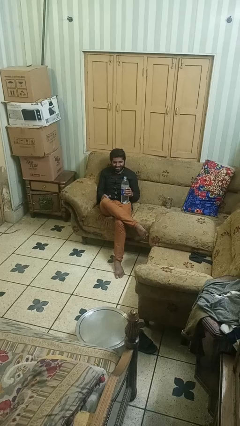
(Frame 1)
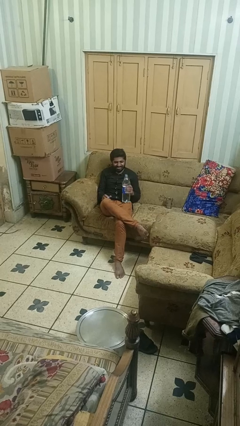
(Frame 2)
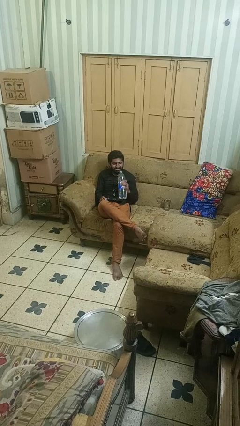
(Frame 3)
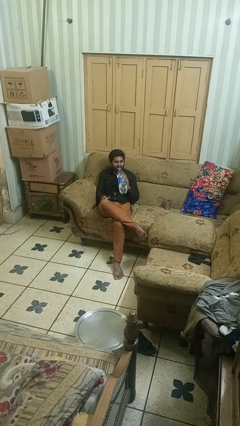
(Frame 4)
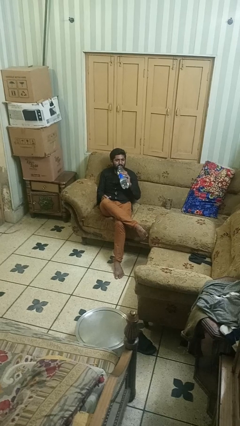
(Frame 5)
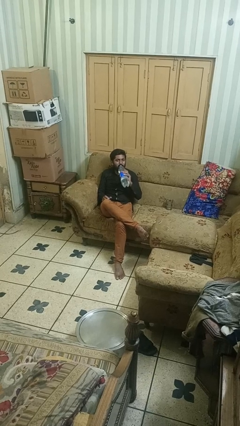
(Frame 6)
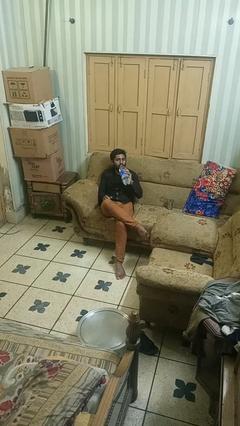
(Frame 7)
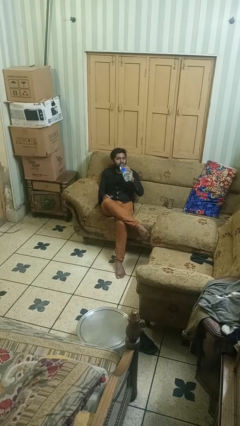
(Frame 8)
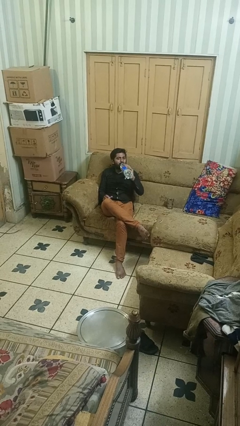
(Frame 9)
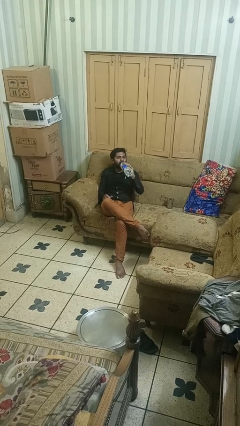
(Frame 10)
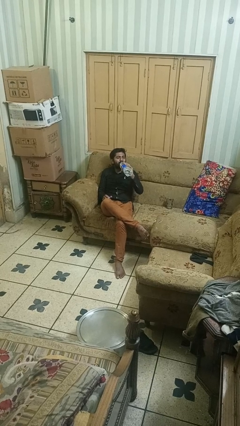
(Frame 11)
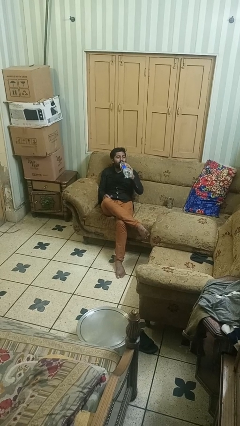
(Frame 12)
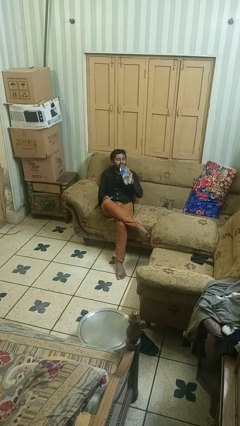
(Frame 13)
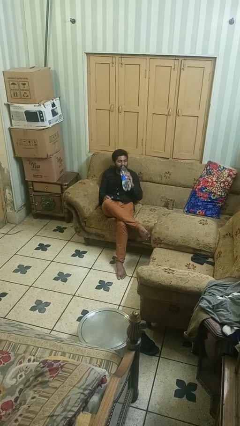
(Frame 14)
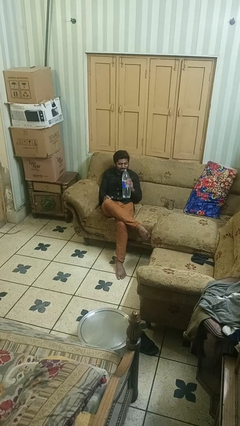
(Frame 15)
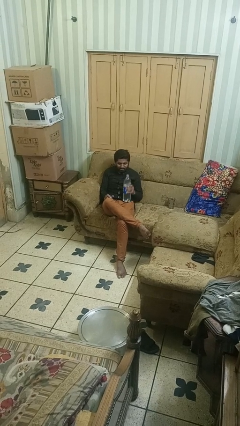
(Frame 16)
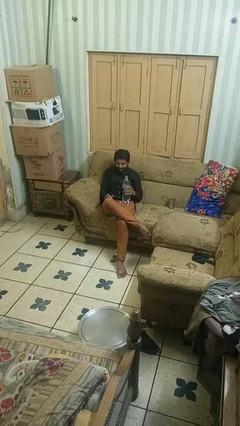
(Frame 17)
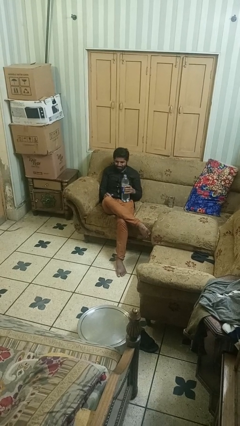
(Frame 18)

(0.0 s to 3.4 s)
person drinks from bottle

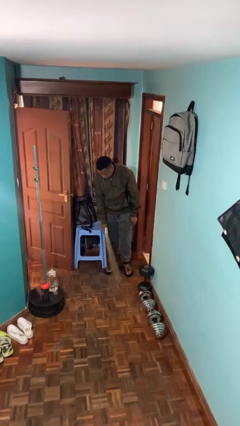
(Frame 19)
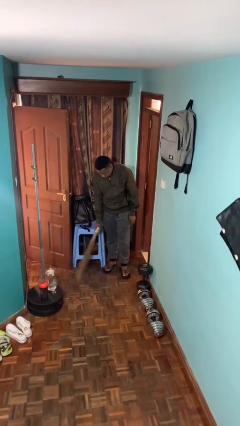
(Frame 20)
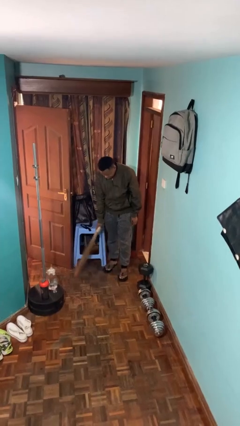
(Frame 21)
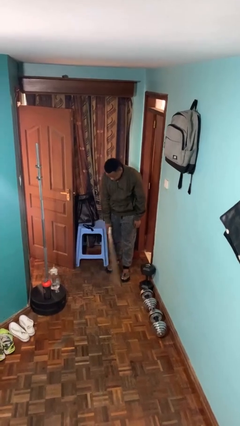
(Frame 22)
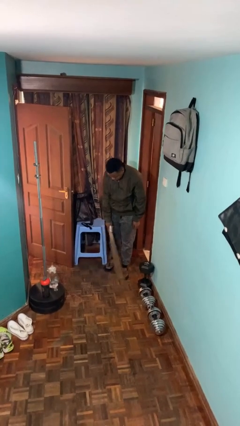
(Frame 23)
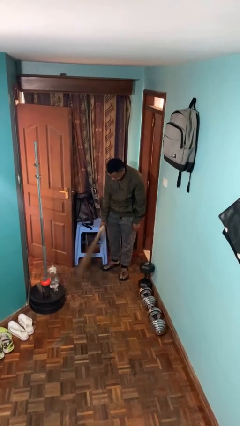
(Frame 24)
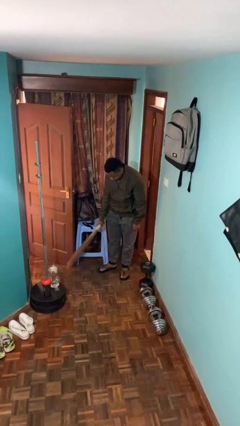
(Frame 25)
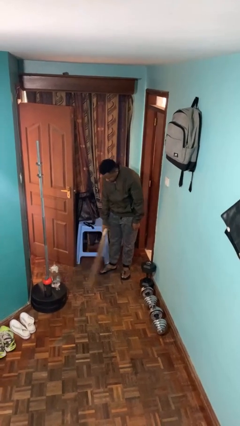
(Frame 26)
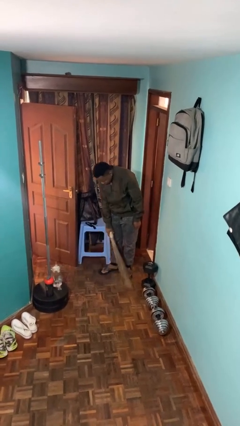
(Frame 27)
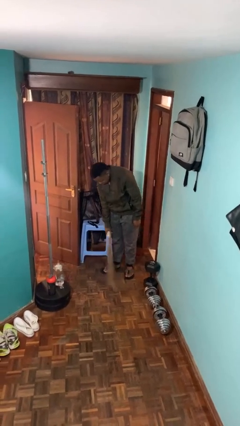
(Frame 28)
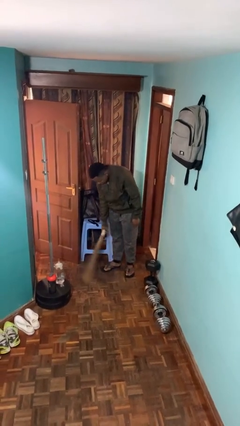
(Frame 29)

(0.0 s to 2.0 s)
person sweeps floor

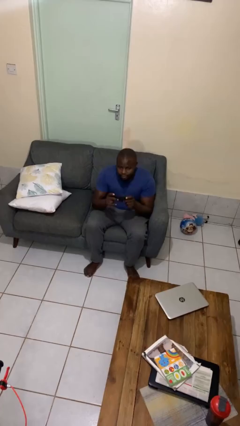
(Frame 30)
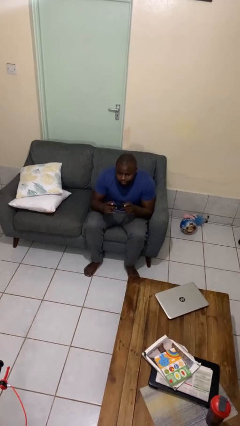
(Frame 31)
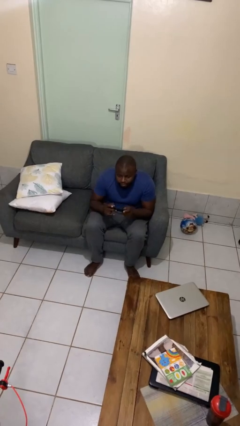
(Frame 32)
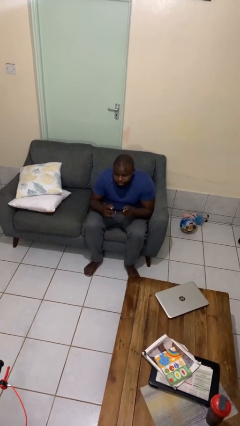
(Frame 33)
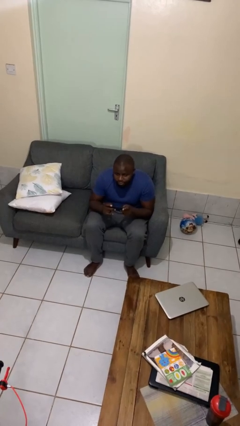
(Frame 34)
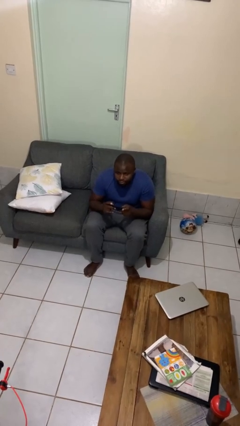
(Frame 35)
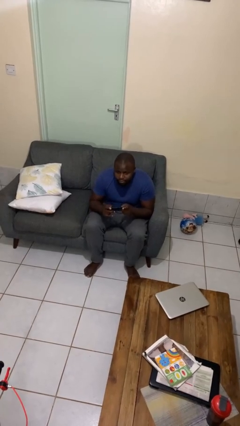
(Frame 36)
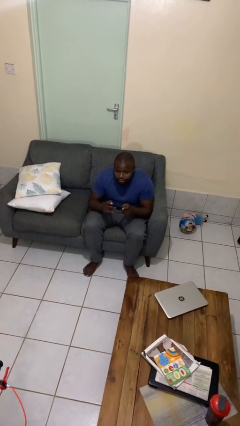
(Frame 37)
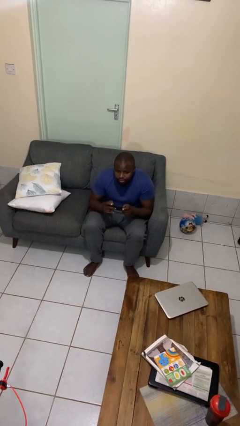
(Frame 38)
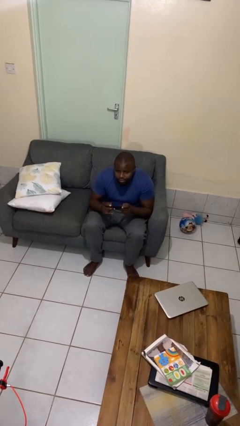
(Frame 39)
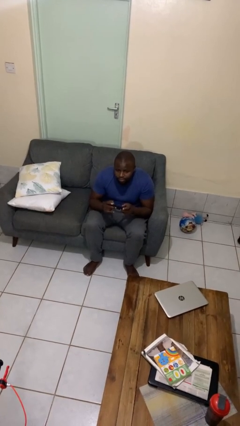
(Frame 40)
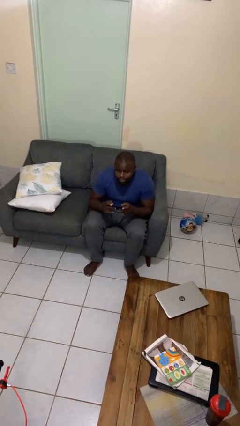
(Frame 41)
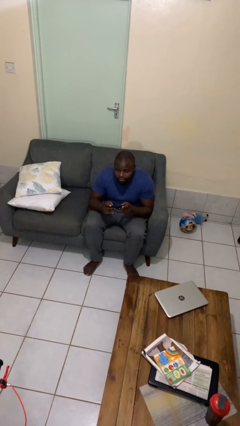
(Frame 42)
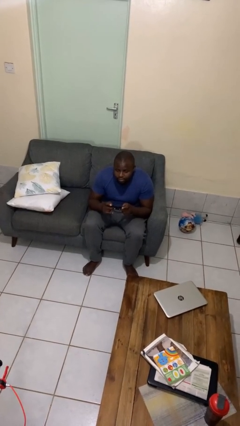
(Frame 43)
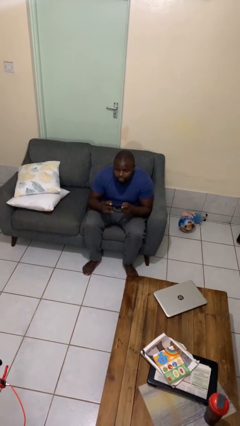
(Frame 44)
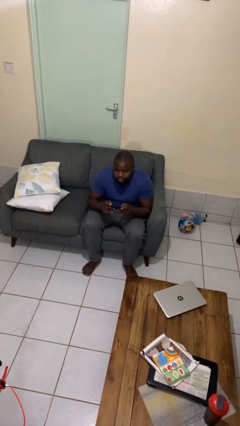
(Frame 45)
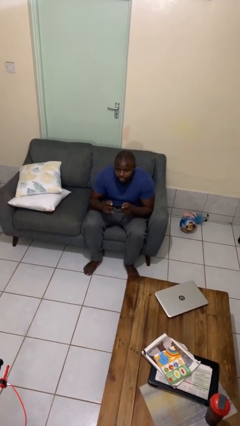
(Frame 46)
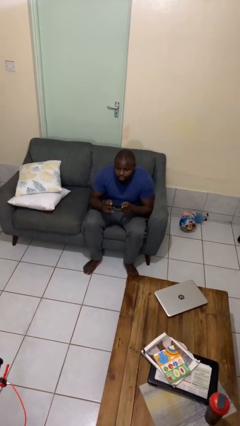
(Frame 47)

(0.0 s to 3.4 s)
person interacts with handheld game

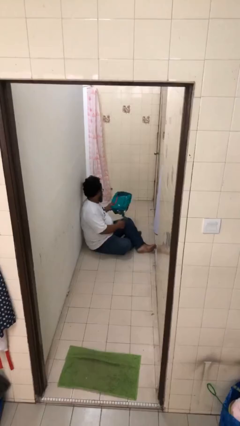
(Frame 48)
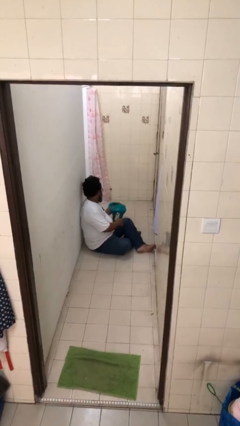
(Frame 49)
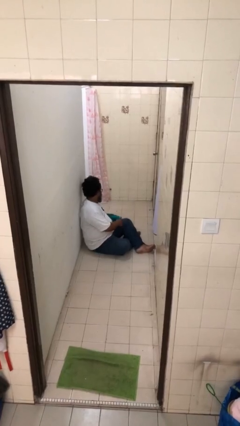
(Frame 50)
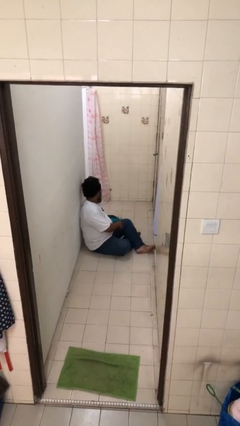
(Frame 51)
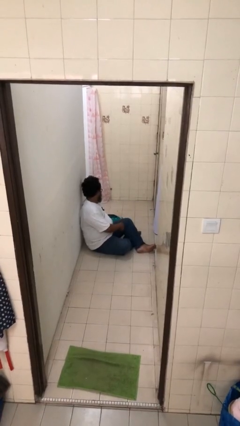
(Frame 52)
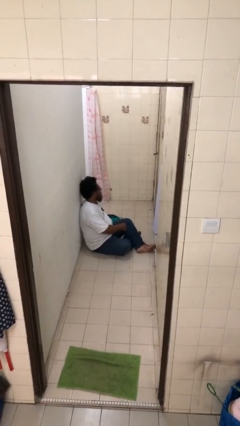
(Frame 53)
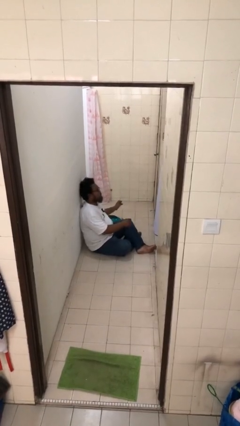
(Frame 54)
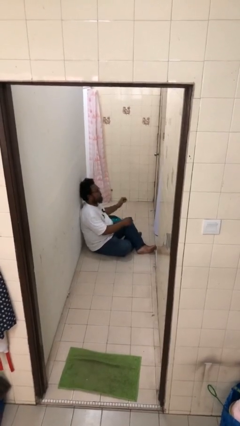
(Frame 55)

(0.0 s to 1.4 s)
person puts down object on floor

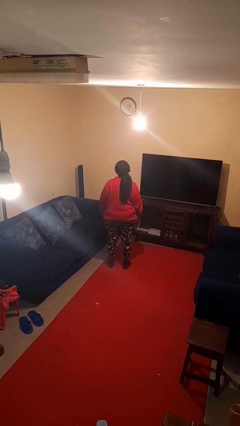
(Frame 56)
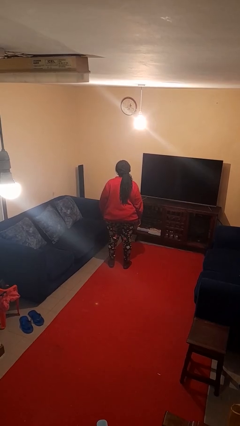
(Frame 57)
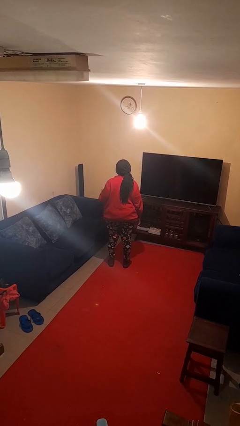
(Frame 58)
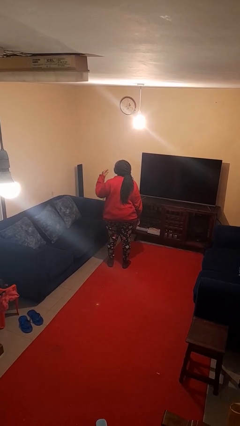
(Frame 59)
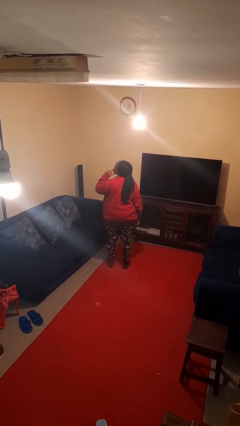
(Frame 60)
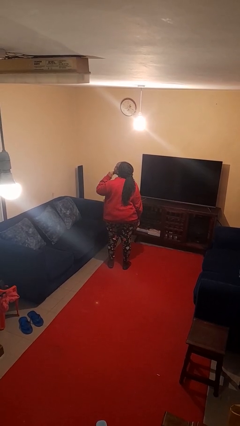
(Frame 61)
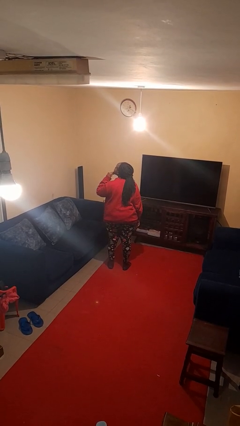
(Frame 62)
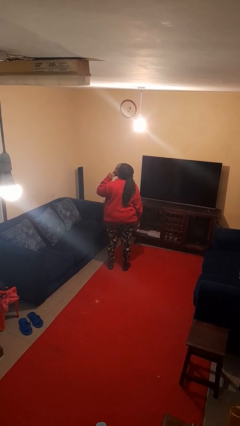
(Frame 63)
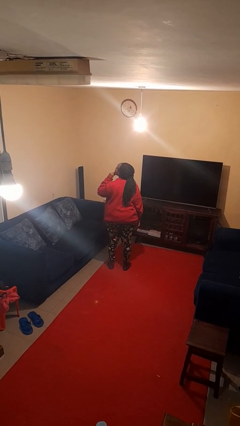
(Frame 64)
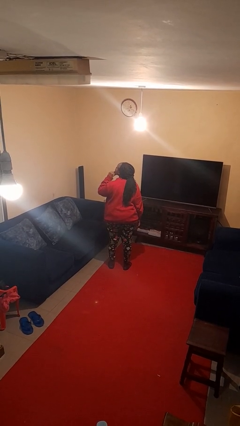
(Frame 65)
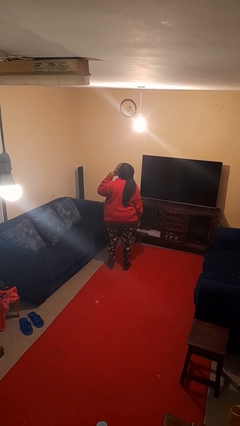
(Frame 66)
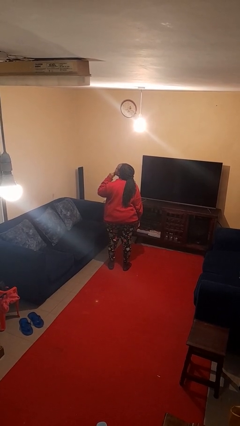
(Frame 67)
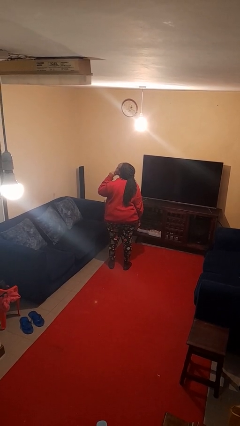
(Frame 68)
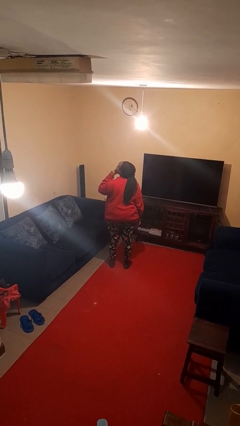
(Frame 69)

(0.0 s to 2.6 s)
person strokes chin

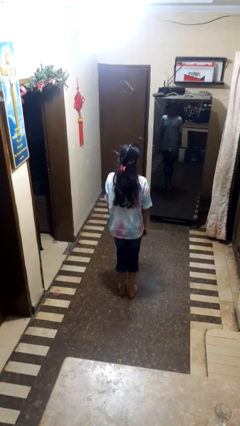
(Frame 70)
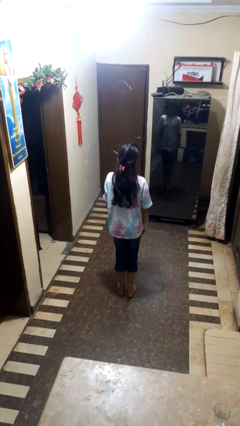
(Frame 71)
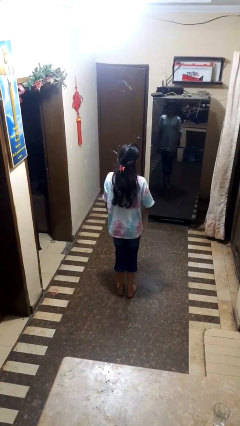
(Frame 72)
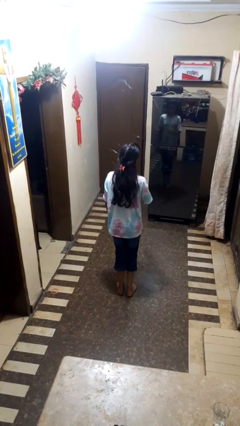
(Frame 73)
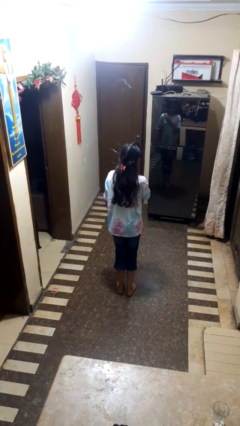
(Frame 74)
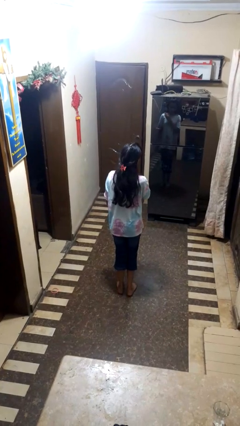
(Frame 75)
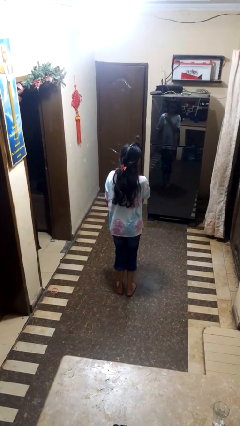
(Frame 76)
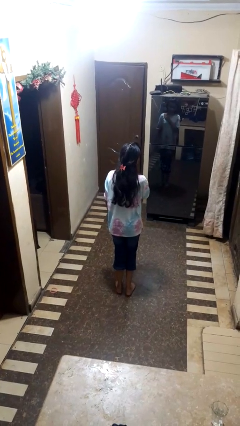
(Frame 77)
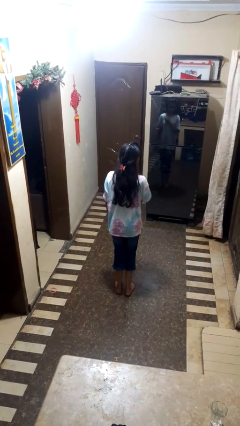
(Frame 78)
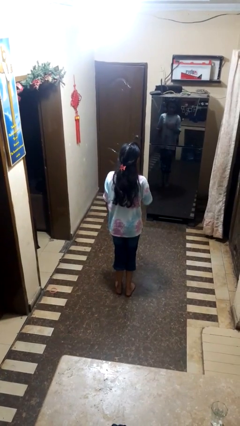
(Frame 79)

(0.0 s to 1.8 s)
person drums on chest

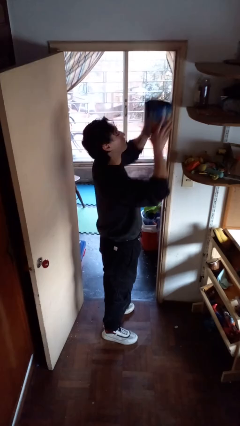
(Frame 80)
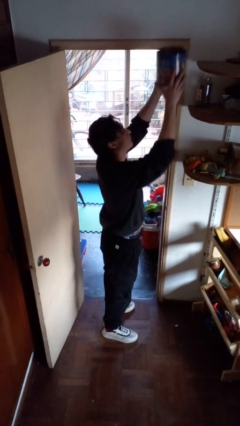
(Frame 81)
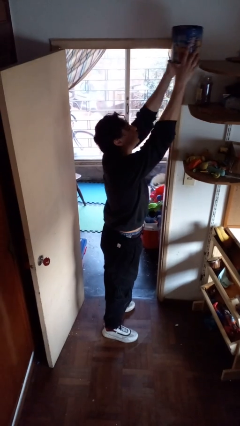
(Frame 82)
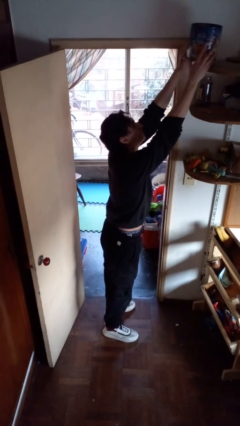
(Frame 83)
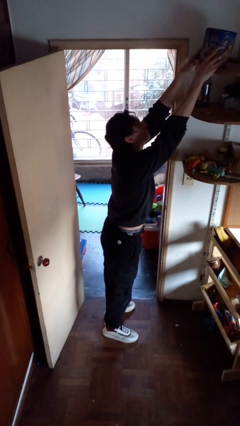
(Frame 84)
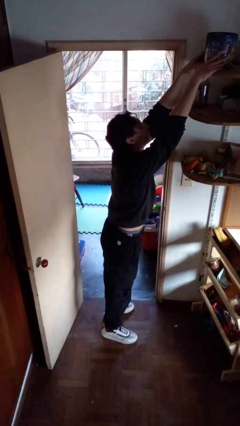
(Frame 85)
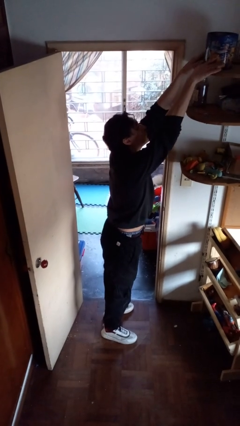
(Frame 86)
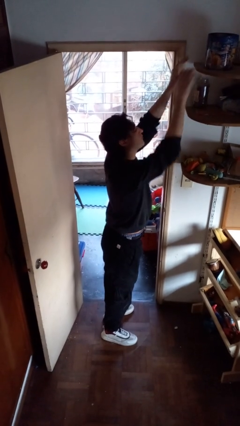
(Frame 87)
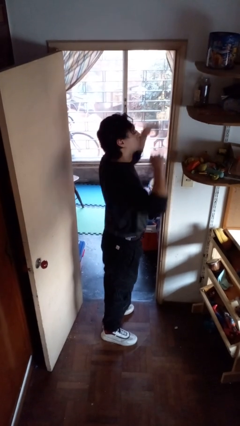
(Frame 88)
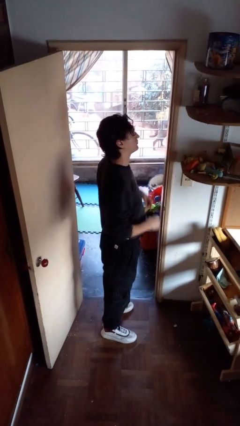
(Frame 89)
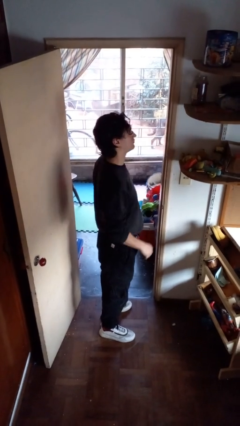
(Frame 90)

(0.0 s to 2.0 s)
person puts down object on shelf

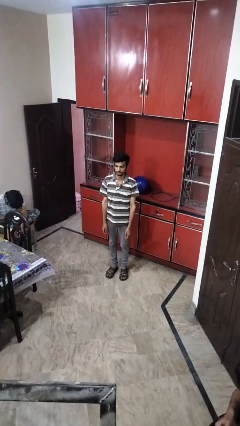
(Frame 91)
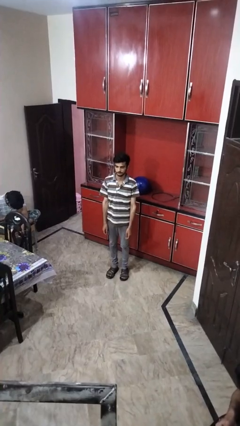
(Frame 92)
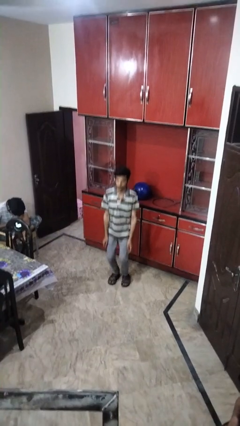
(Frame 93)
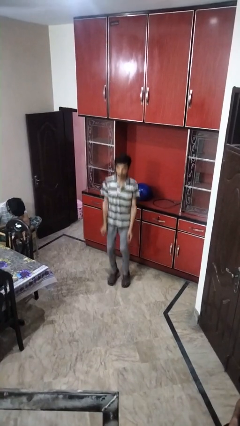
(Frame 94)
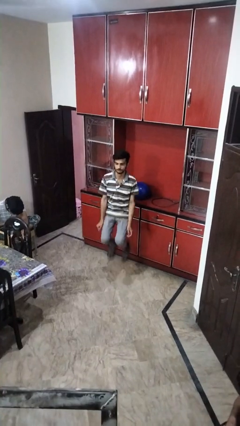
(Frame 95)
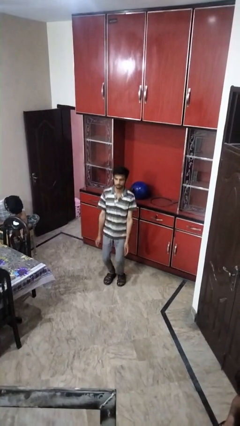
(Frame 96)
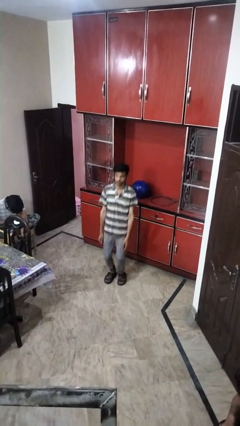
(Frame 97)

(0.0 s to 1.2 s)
person jumps
